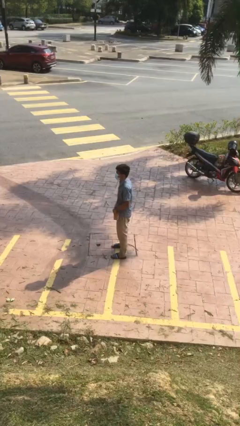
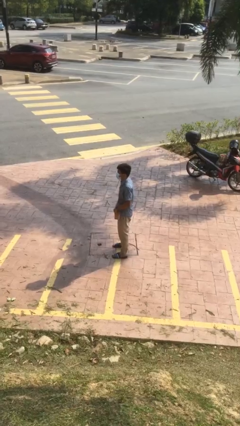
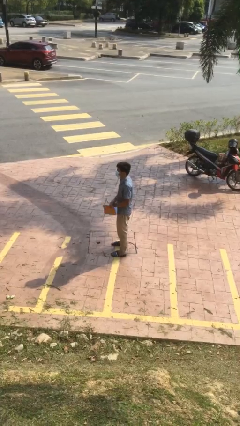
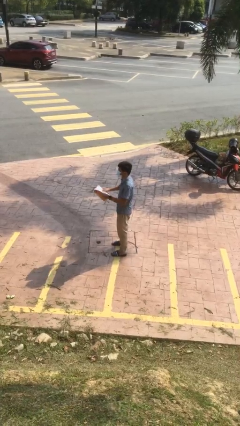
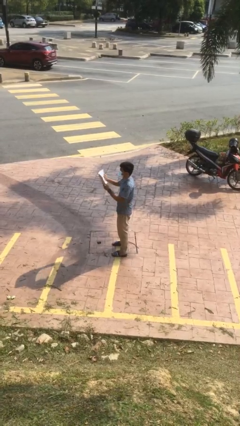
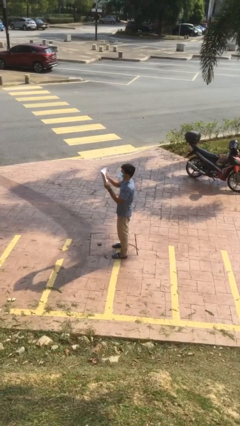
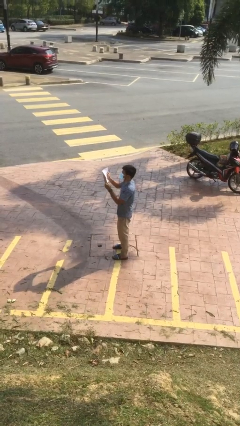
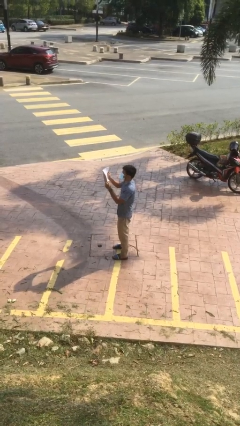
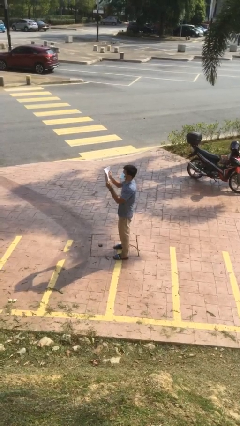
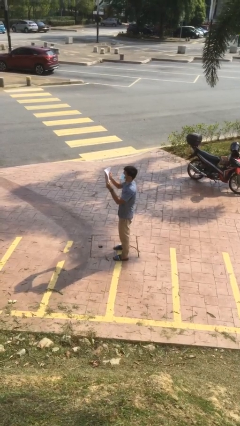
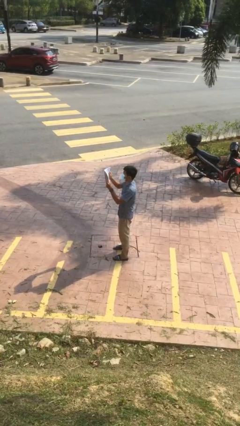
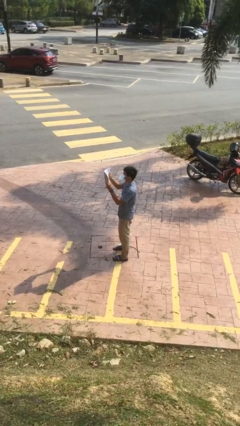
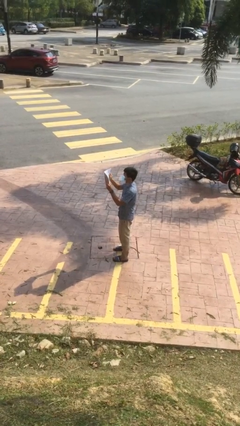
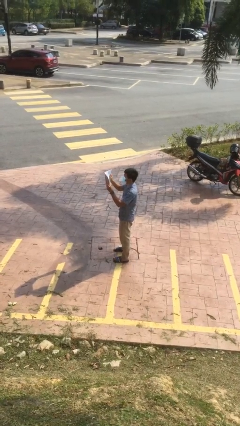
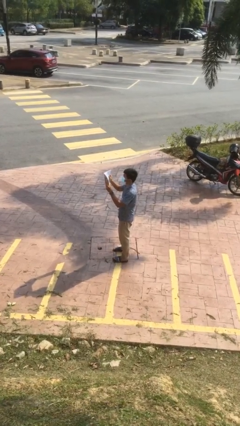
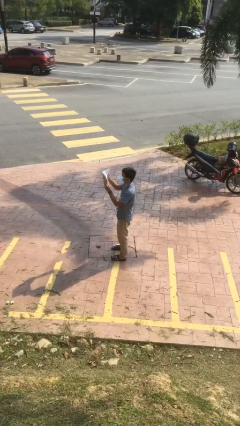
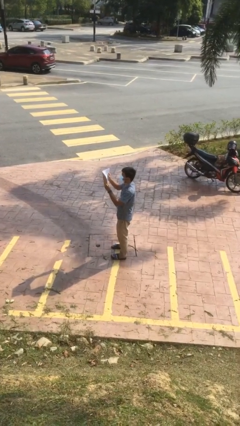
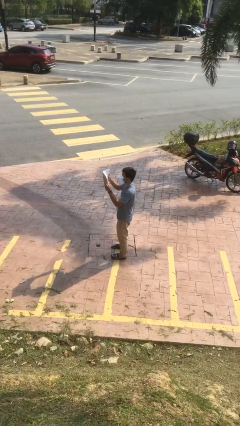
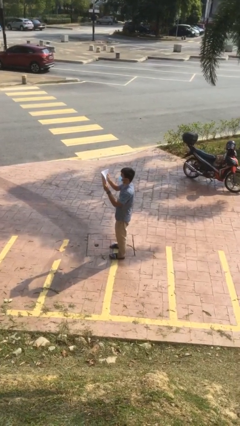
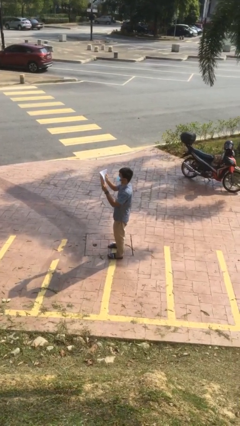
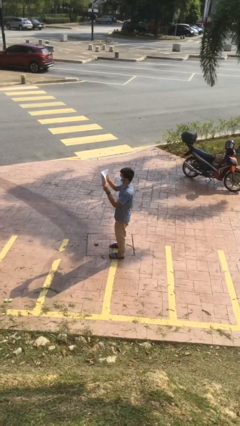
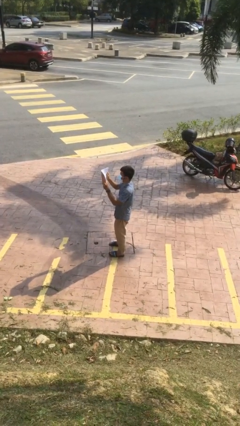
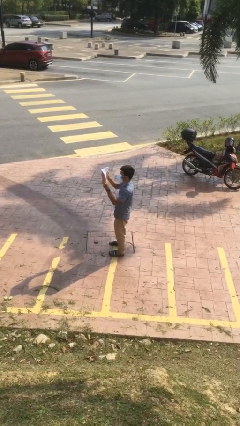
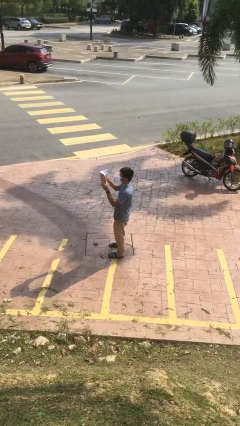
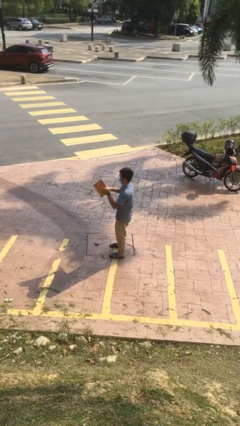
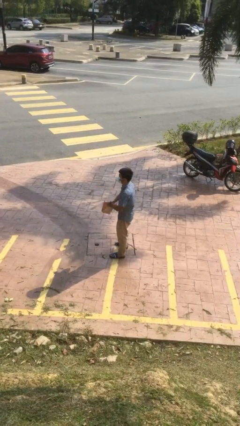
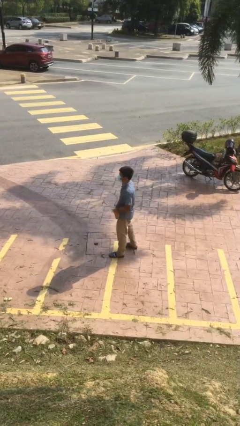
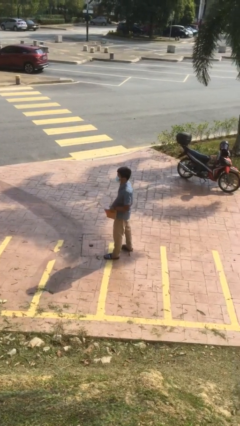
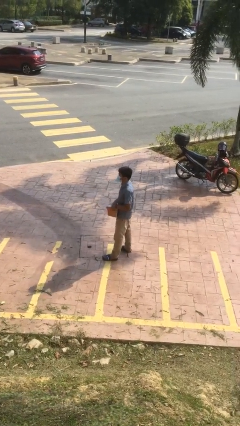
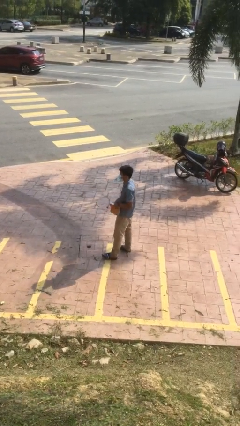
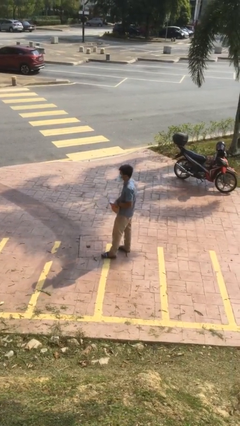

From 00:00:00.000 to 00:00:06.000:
person reads document

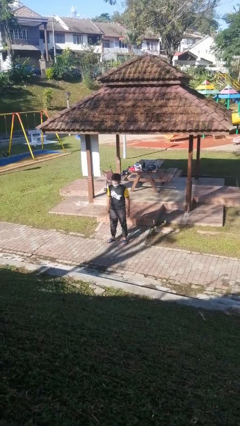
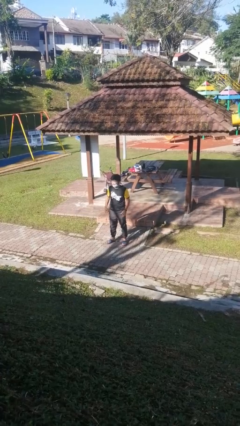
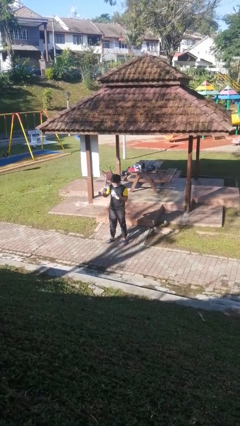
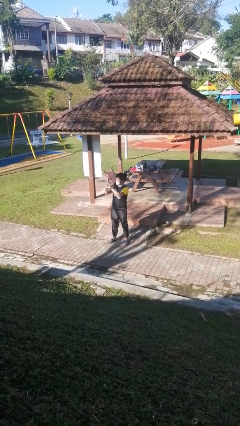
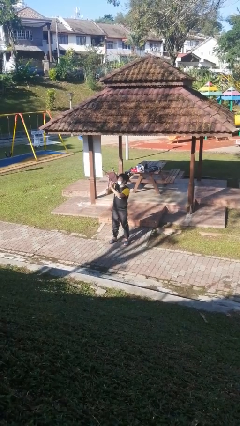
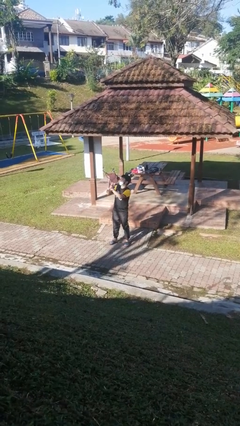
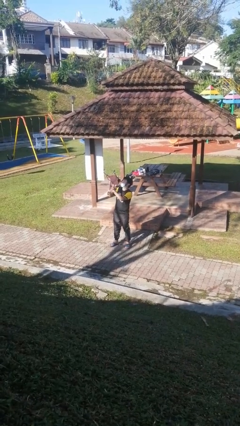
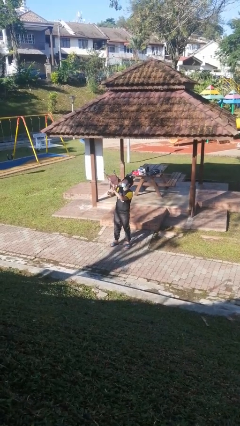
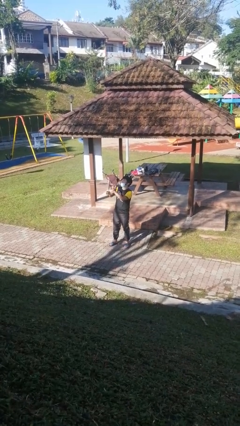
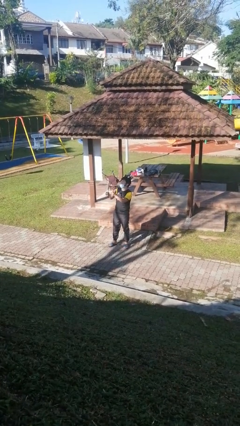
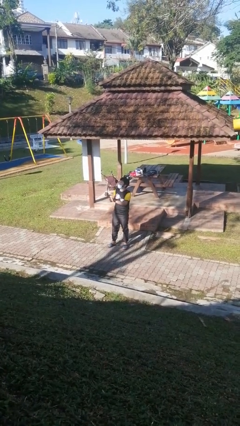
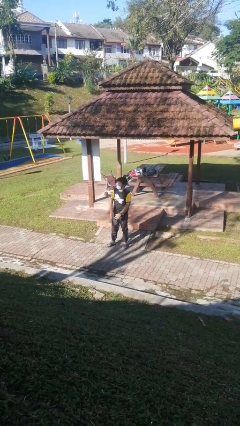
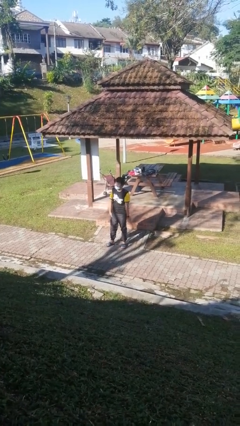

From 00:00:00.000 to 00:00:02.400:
person claps hands

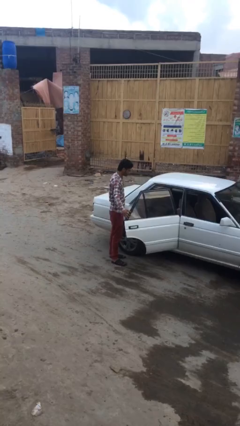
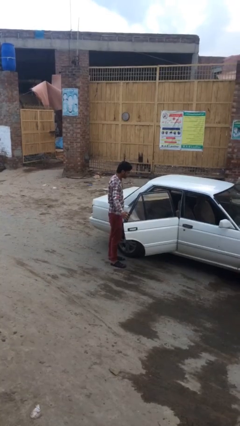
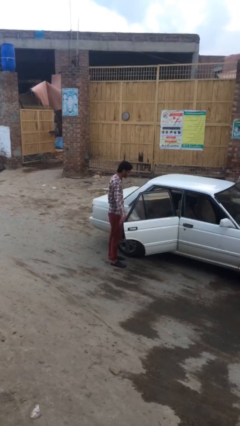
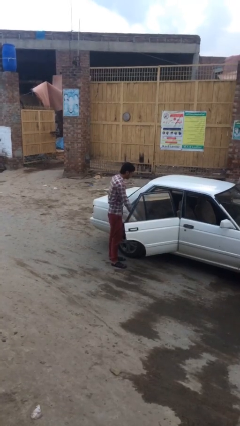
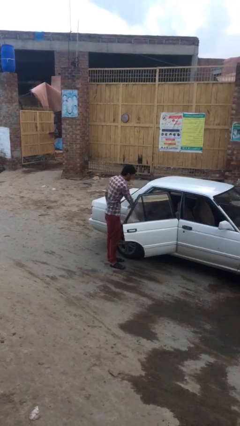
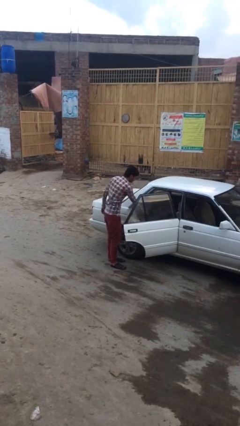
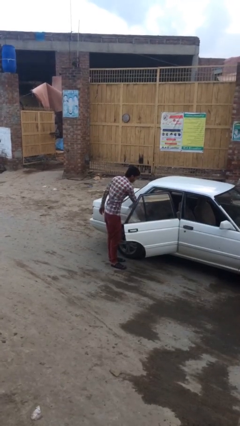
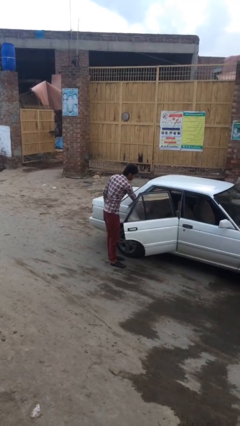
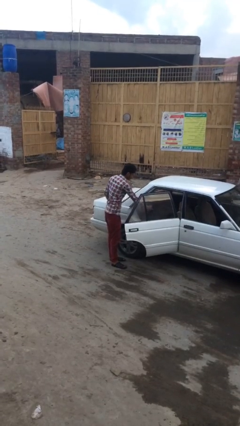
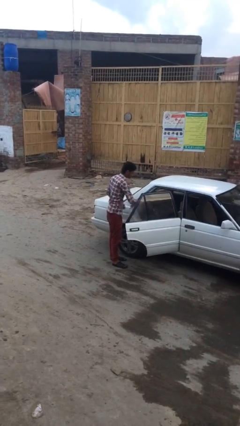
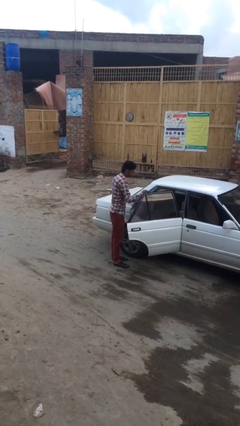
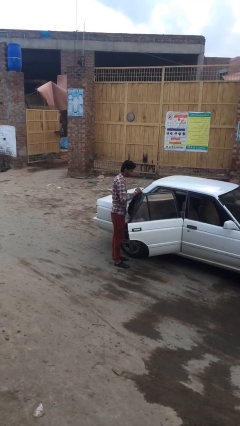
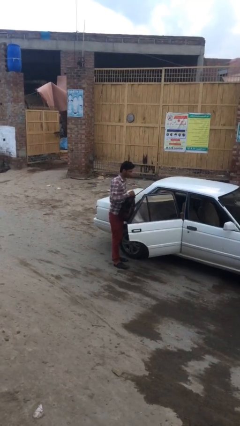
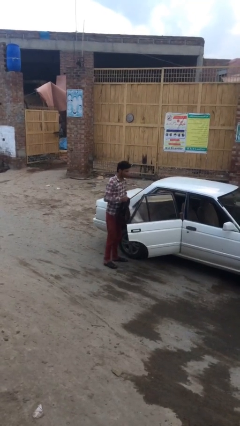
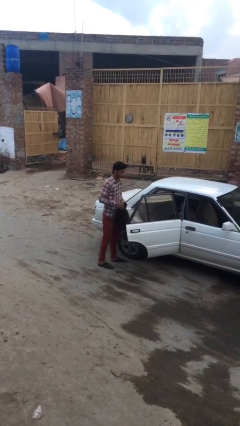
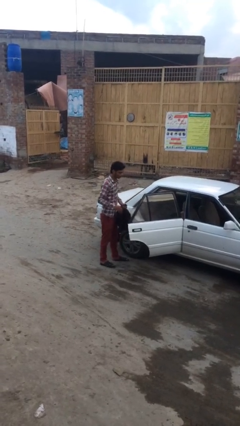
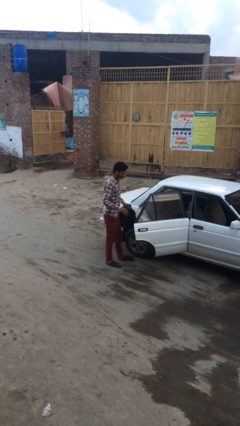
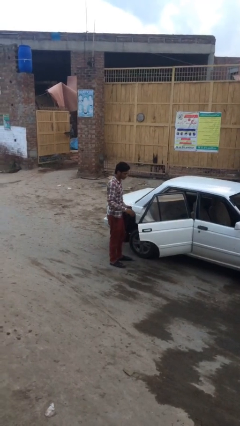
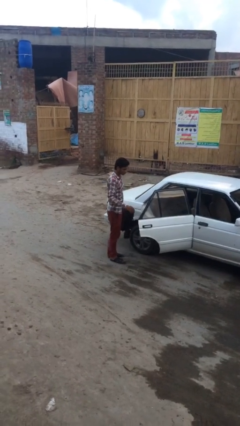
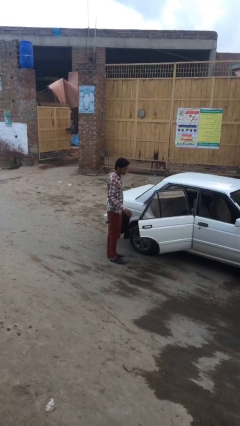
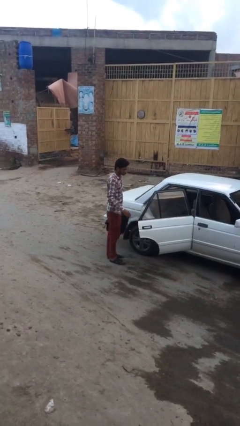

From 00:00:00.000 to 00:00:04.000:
person unloads car

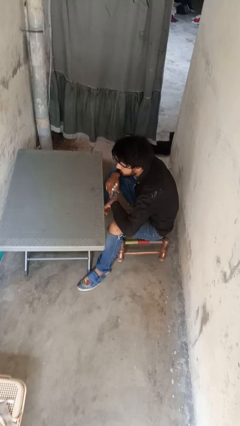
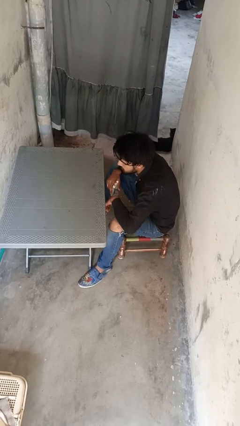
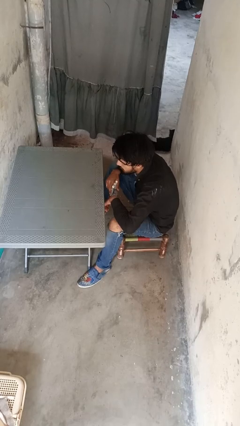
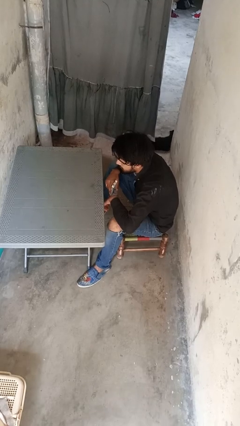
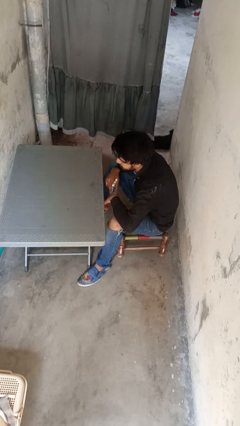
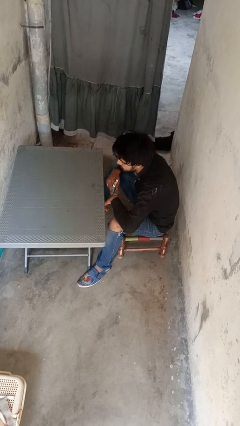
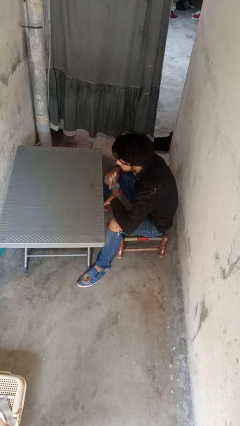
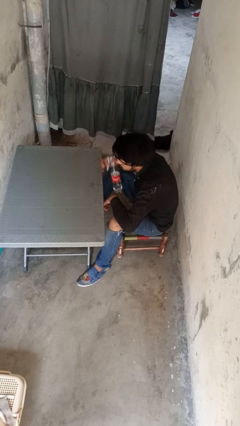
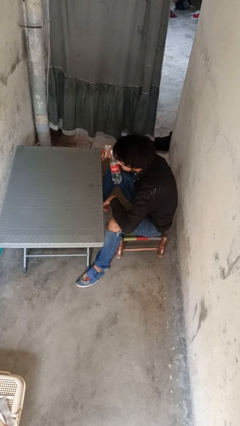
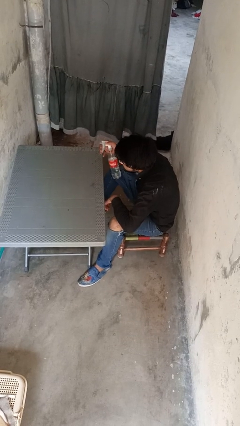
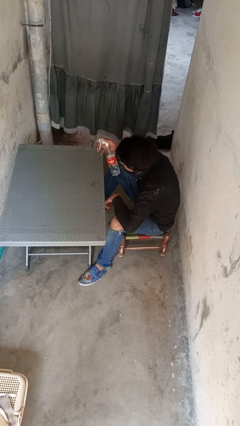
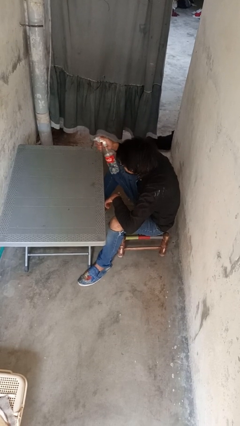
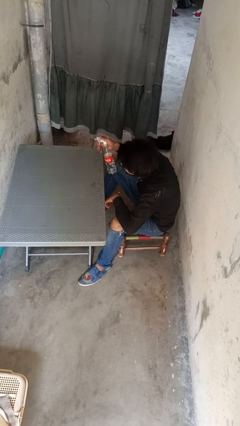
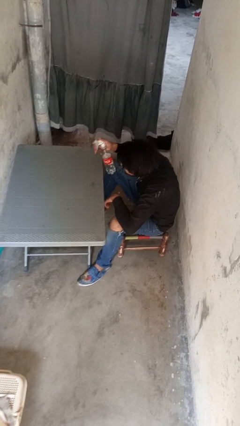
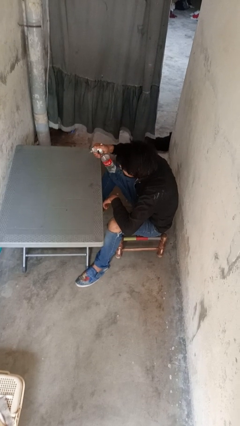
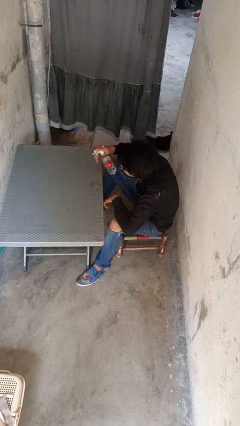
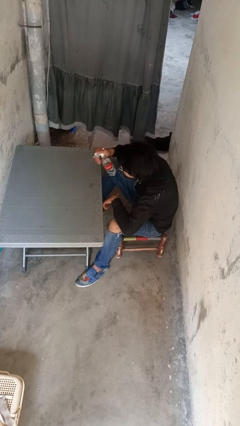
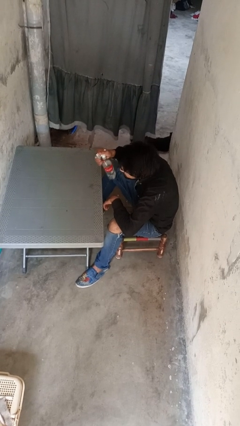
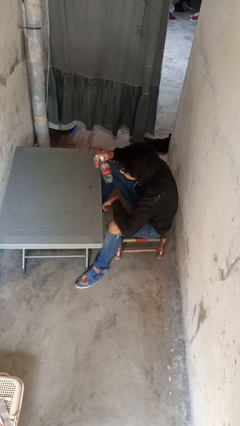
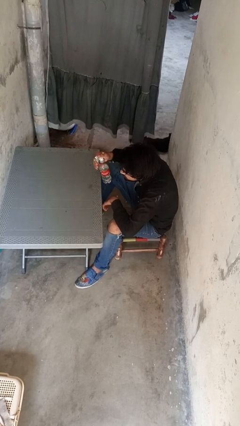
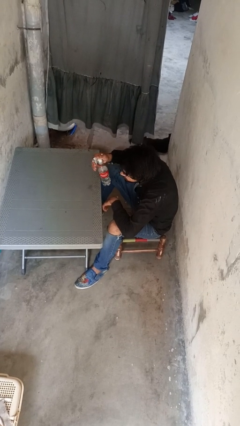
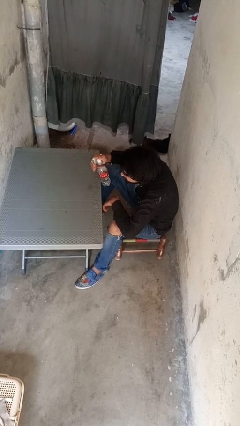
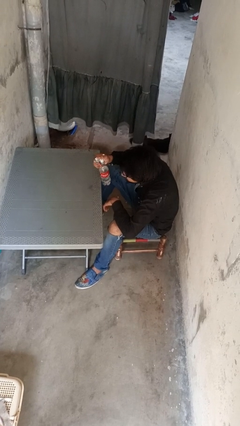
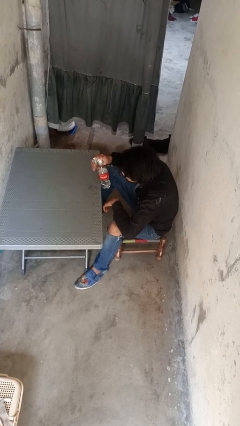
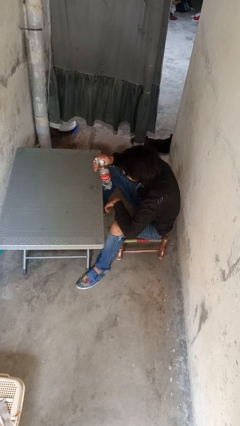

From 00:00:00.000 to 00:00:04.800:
person sprays from bottle

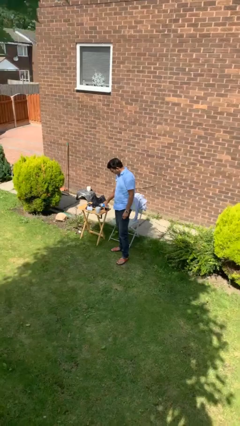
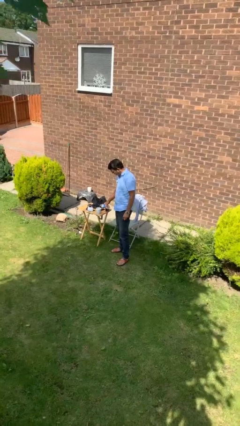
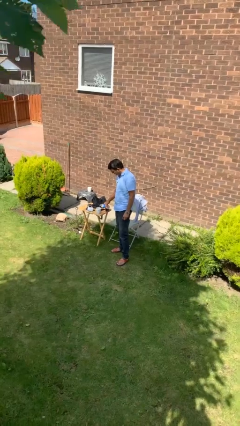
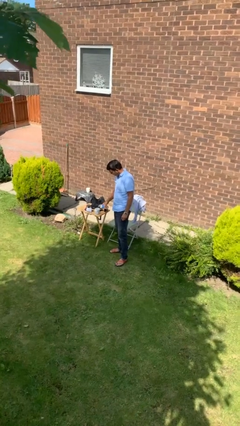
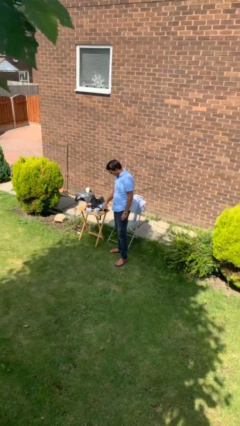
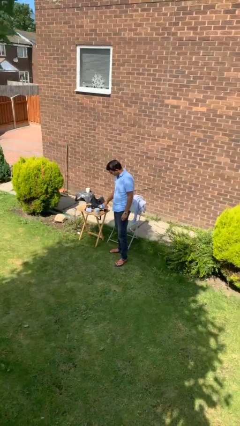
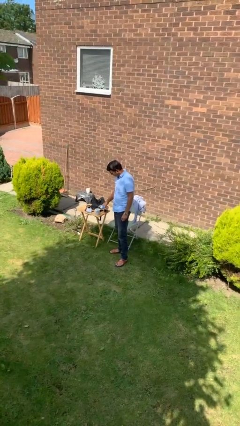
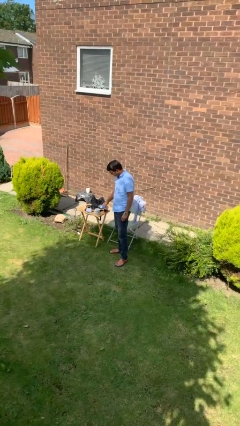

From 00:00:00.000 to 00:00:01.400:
person pours liquid into cup
